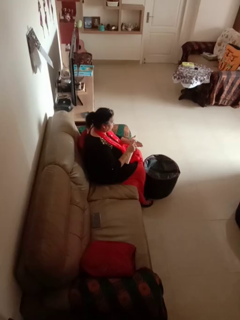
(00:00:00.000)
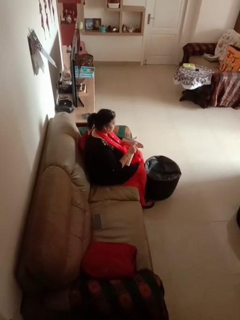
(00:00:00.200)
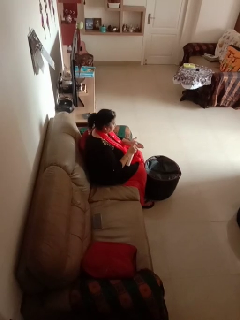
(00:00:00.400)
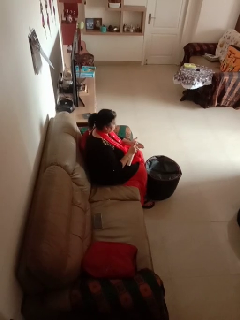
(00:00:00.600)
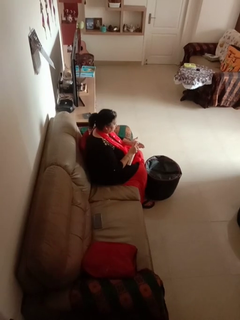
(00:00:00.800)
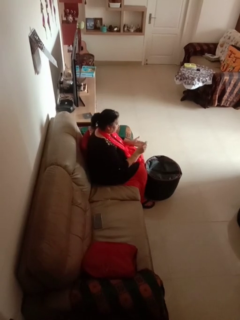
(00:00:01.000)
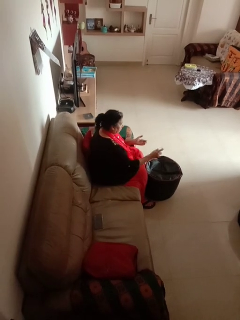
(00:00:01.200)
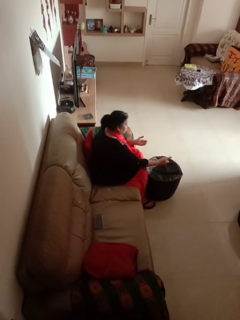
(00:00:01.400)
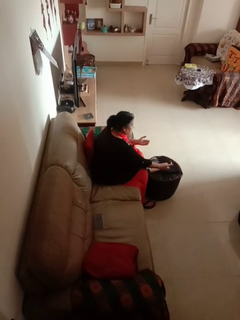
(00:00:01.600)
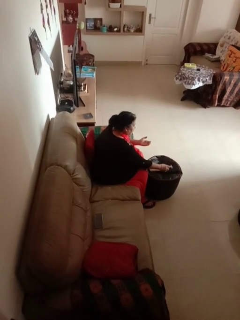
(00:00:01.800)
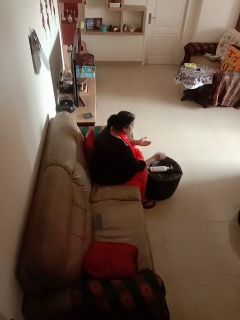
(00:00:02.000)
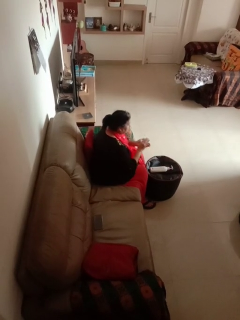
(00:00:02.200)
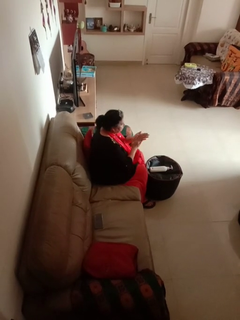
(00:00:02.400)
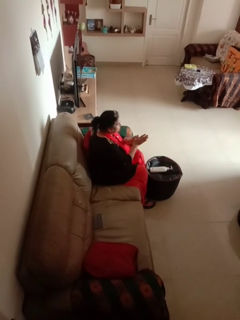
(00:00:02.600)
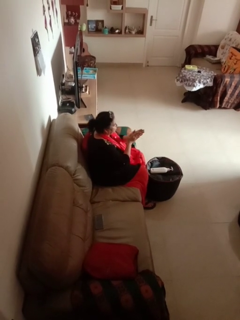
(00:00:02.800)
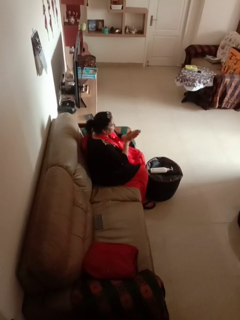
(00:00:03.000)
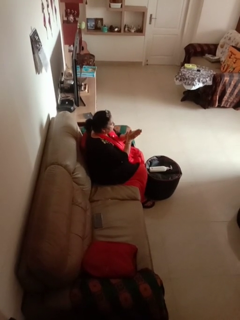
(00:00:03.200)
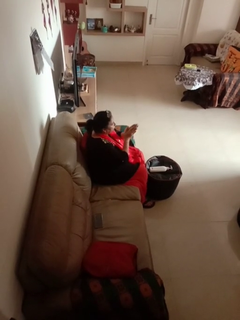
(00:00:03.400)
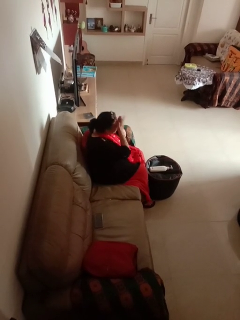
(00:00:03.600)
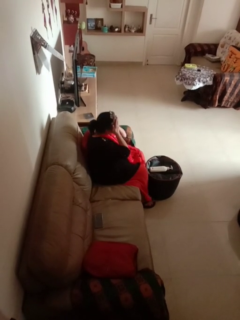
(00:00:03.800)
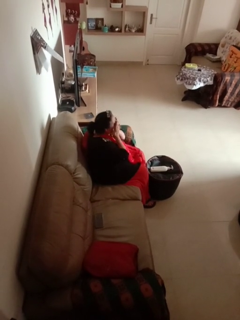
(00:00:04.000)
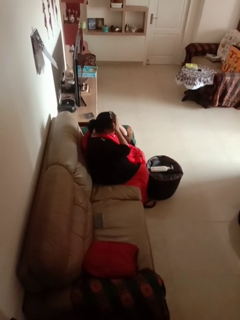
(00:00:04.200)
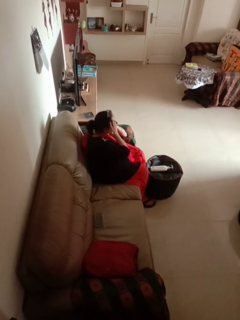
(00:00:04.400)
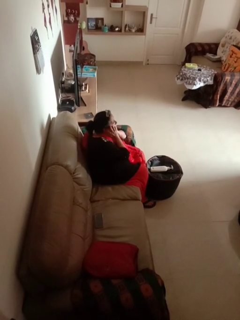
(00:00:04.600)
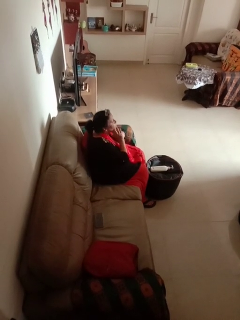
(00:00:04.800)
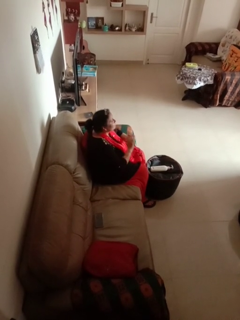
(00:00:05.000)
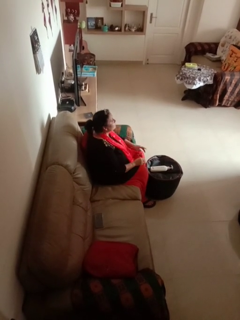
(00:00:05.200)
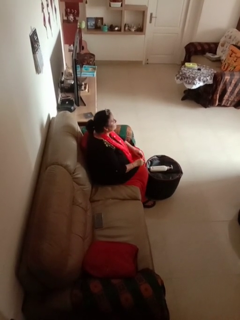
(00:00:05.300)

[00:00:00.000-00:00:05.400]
person applies facial moisturizer

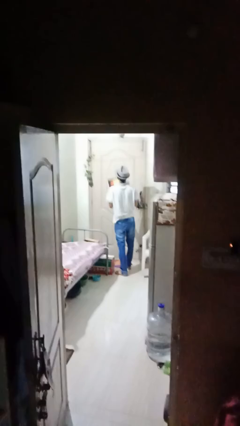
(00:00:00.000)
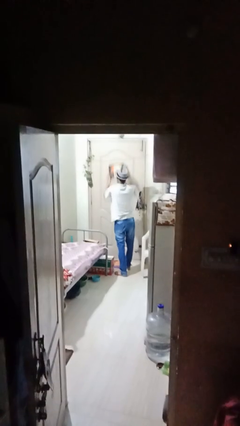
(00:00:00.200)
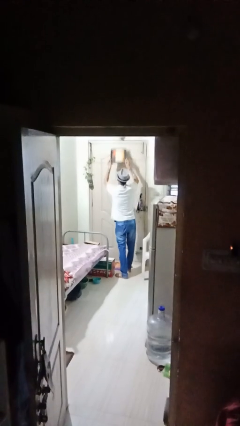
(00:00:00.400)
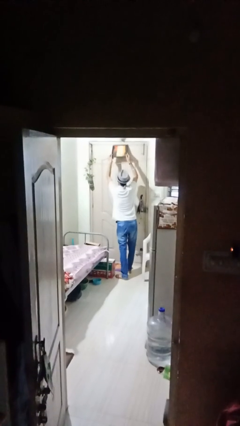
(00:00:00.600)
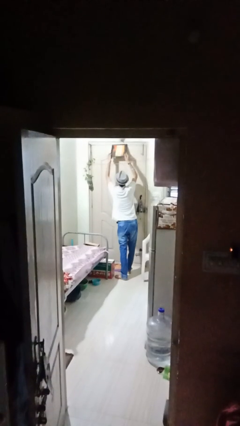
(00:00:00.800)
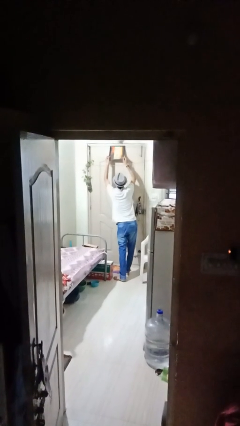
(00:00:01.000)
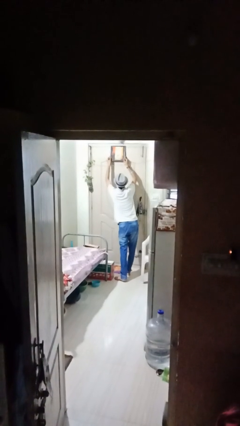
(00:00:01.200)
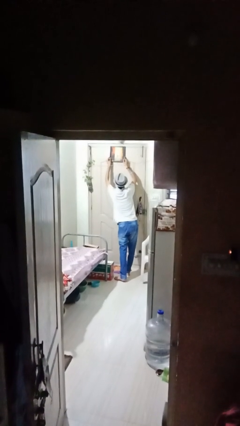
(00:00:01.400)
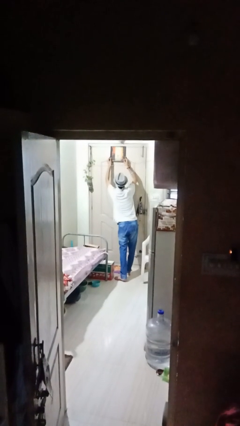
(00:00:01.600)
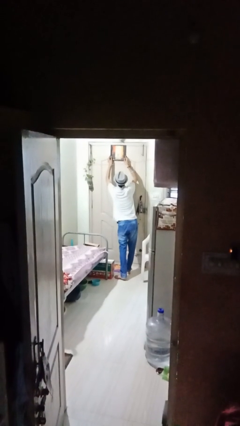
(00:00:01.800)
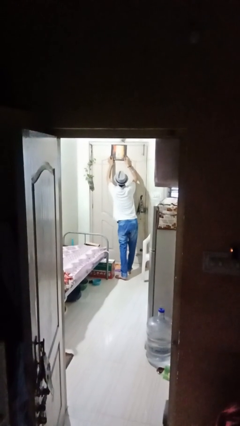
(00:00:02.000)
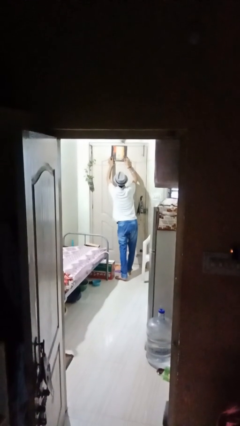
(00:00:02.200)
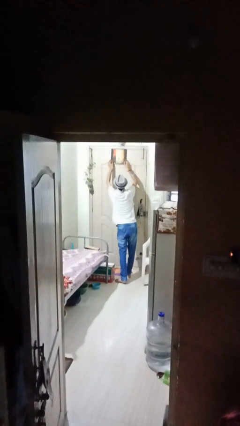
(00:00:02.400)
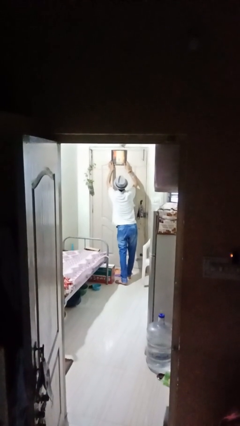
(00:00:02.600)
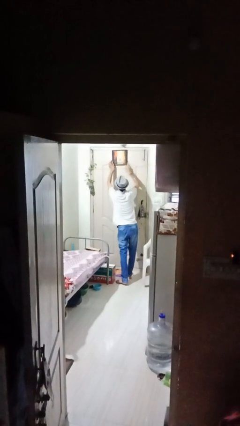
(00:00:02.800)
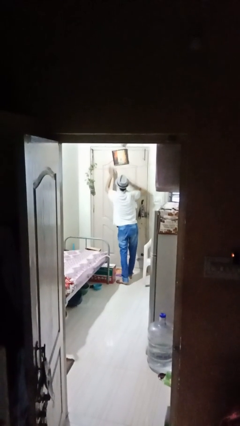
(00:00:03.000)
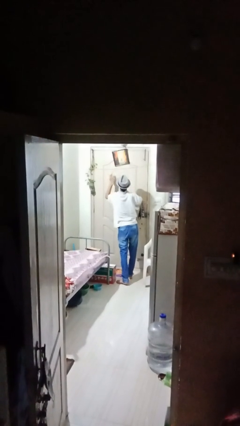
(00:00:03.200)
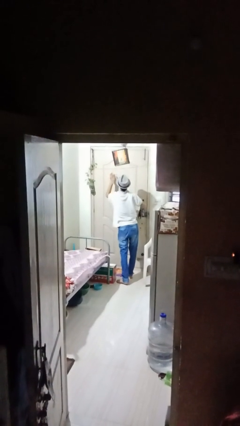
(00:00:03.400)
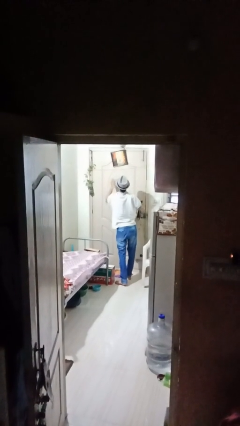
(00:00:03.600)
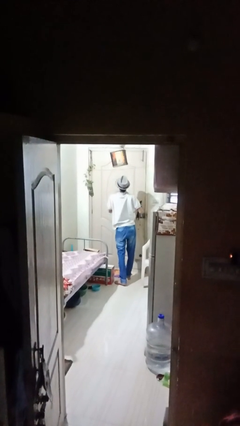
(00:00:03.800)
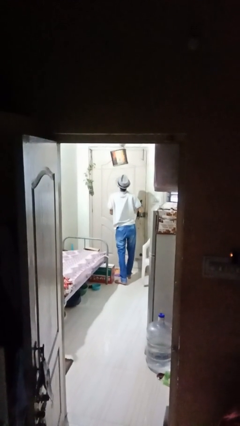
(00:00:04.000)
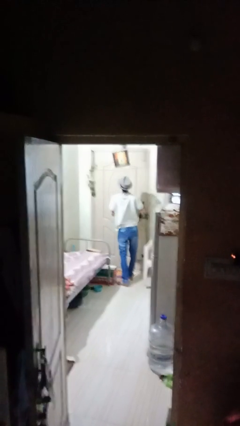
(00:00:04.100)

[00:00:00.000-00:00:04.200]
person puts up picture frame

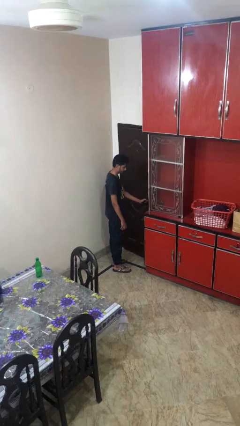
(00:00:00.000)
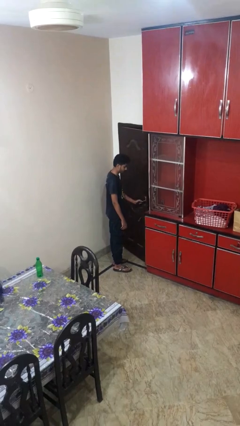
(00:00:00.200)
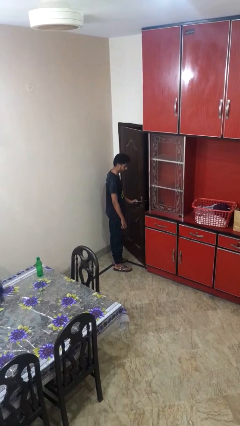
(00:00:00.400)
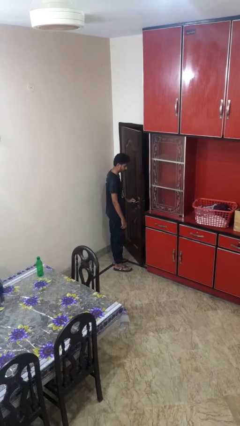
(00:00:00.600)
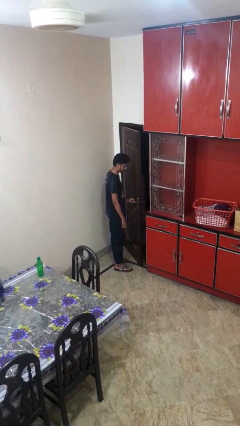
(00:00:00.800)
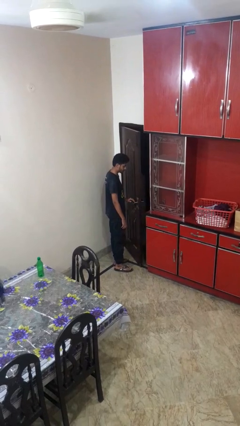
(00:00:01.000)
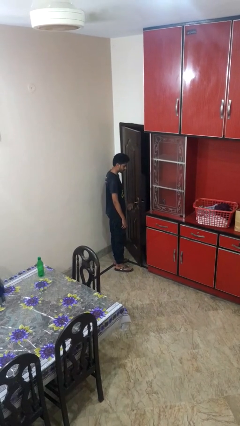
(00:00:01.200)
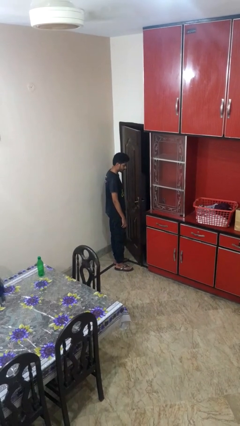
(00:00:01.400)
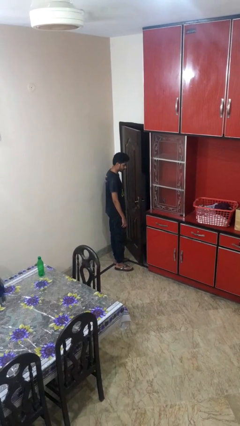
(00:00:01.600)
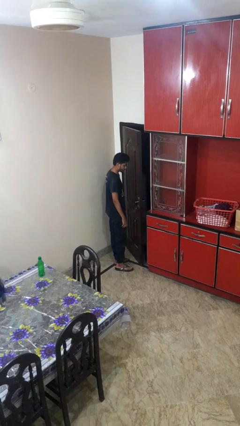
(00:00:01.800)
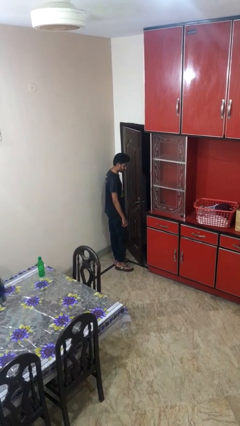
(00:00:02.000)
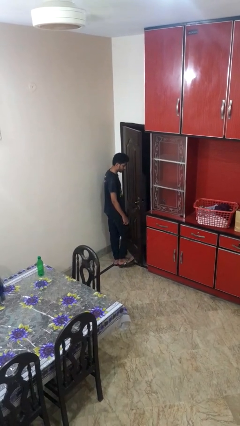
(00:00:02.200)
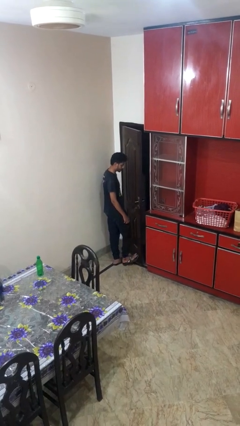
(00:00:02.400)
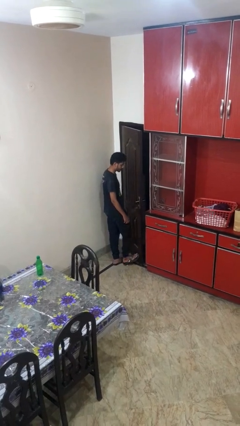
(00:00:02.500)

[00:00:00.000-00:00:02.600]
person opens facility door

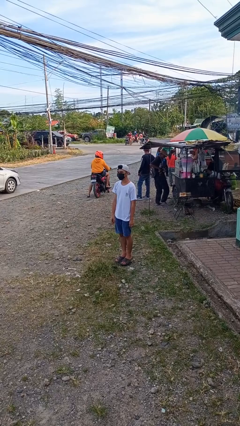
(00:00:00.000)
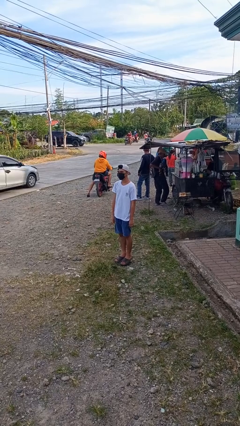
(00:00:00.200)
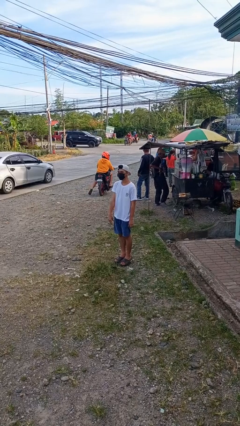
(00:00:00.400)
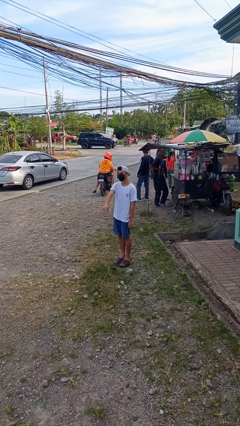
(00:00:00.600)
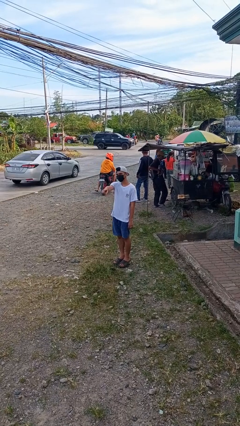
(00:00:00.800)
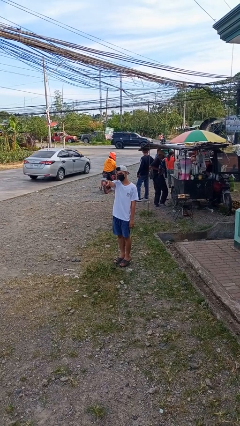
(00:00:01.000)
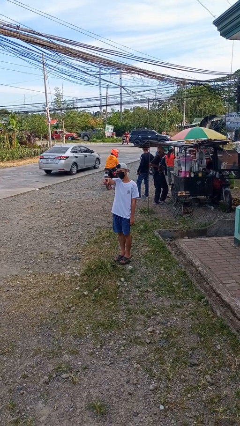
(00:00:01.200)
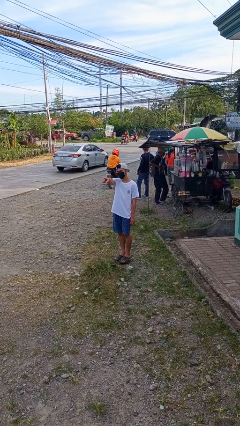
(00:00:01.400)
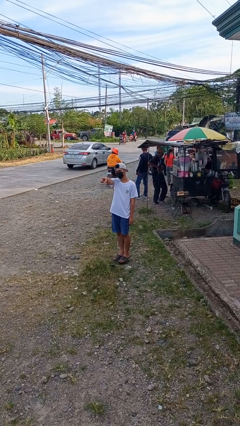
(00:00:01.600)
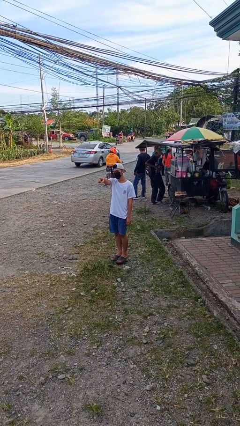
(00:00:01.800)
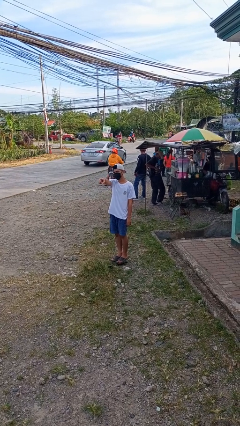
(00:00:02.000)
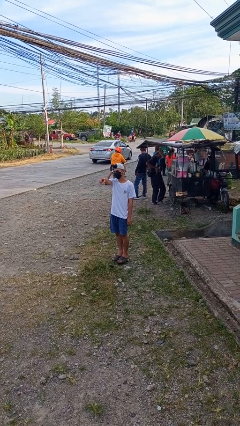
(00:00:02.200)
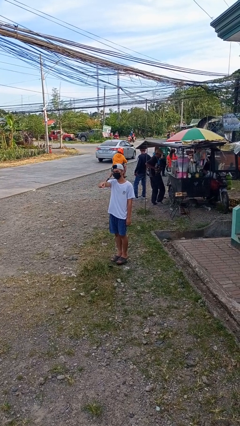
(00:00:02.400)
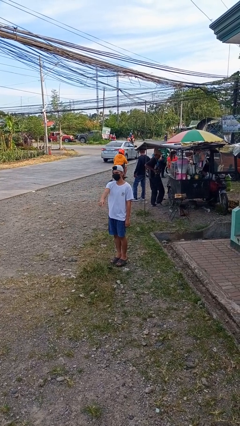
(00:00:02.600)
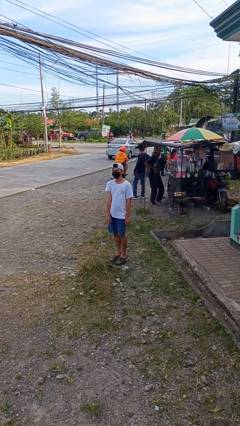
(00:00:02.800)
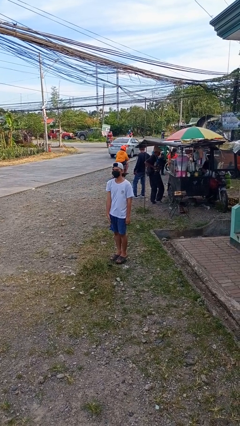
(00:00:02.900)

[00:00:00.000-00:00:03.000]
person points at person

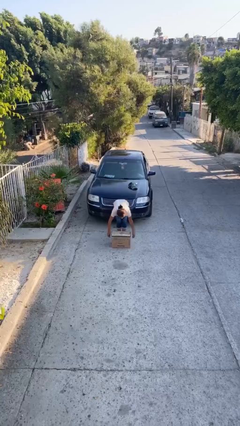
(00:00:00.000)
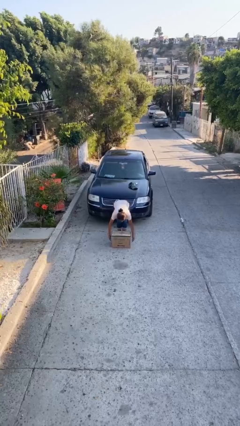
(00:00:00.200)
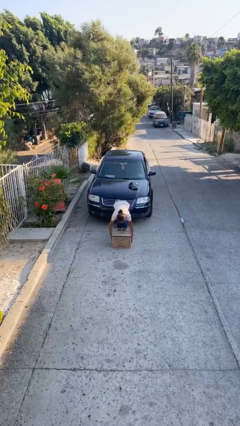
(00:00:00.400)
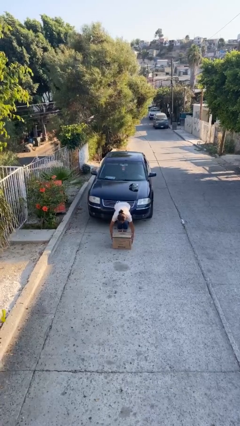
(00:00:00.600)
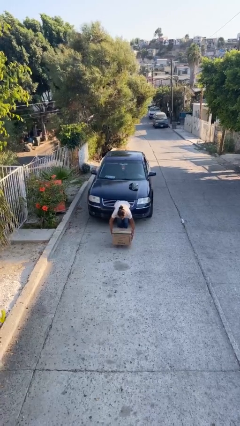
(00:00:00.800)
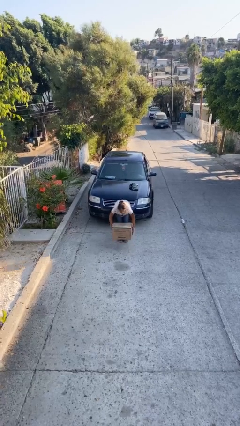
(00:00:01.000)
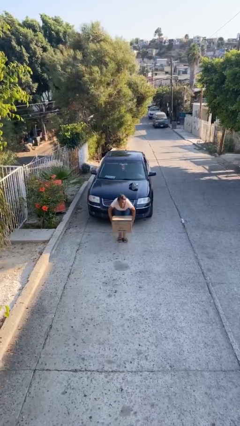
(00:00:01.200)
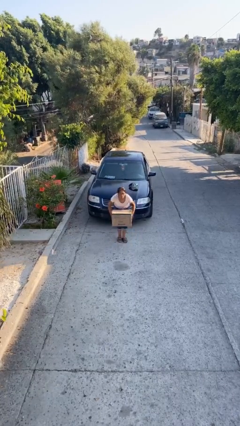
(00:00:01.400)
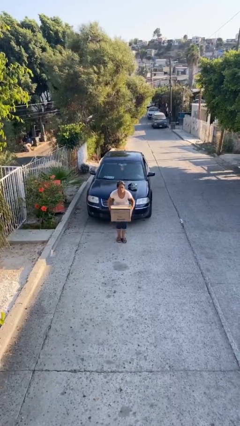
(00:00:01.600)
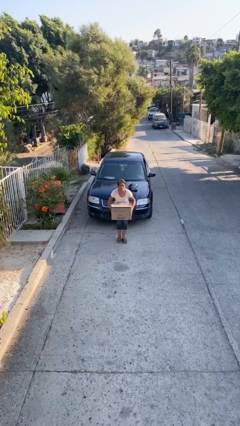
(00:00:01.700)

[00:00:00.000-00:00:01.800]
person picks up object from floor

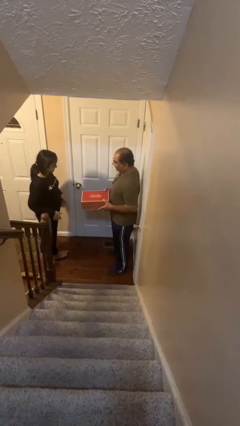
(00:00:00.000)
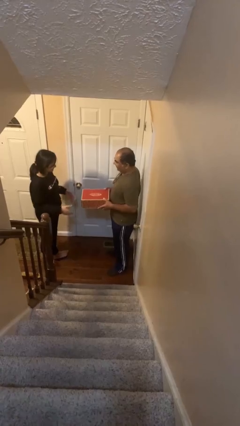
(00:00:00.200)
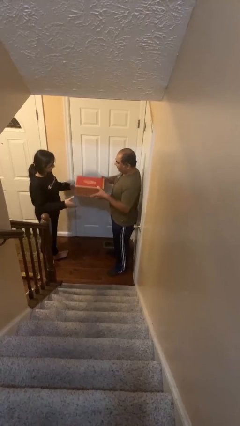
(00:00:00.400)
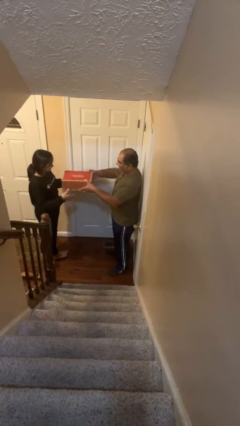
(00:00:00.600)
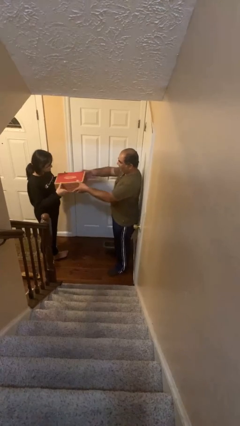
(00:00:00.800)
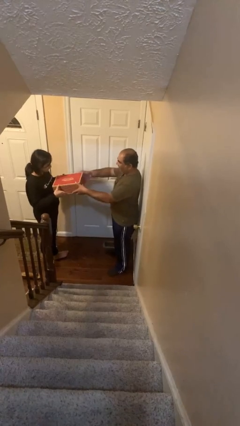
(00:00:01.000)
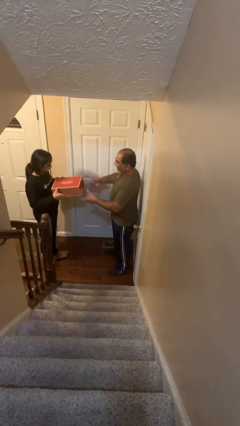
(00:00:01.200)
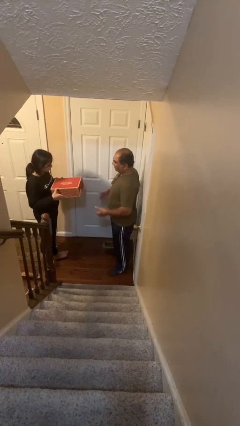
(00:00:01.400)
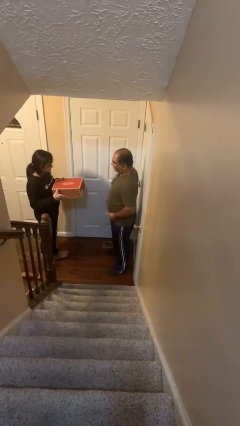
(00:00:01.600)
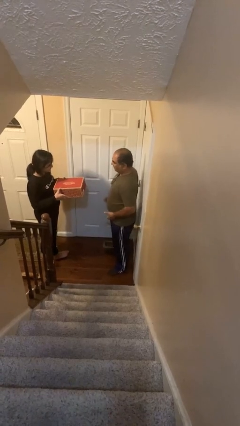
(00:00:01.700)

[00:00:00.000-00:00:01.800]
person transfers object to person
